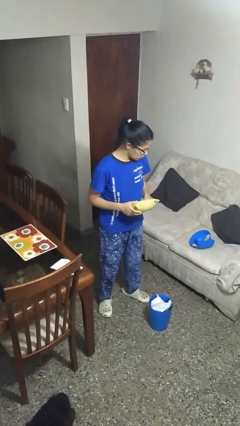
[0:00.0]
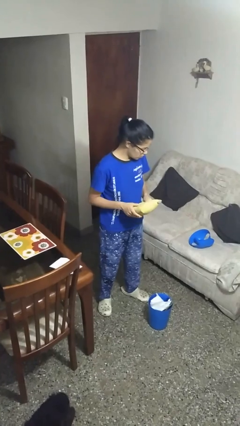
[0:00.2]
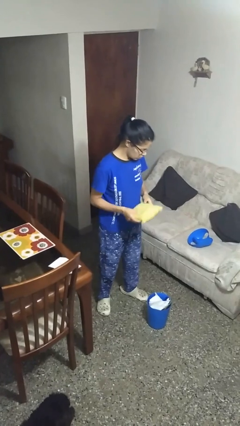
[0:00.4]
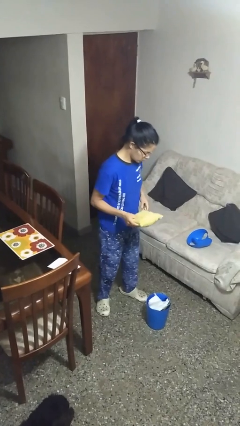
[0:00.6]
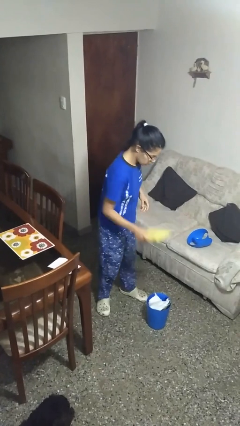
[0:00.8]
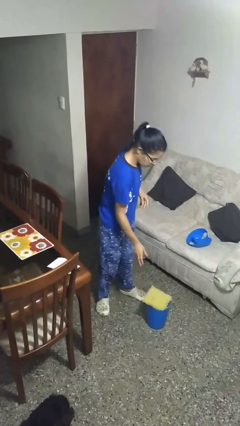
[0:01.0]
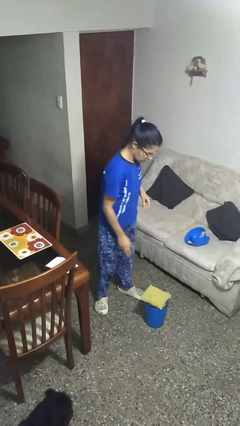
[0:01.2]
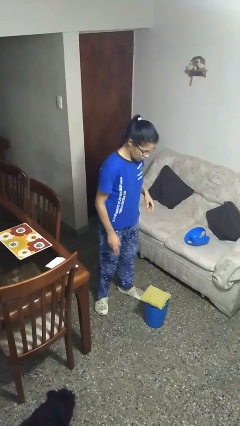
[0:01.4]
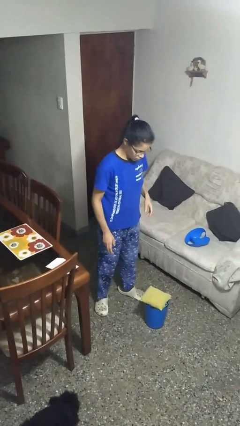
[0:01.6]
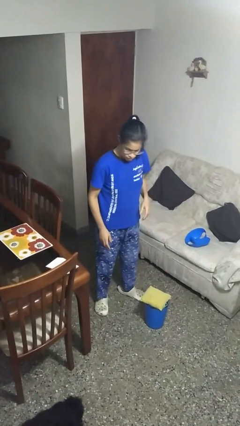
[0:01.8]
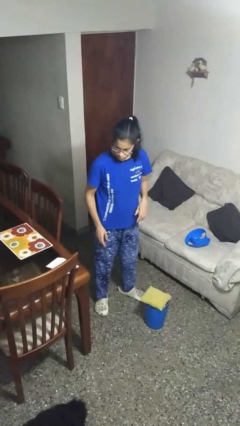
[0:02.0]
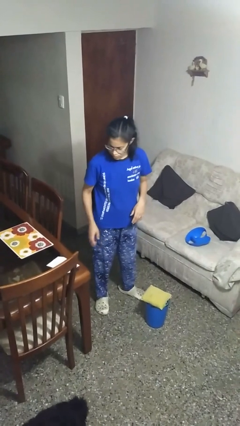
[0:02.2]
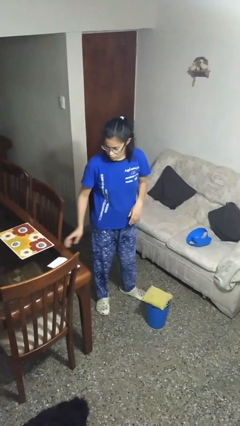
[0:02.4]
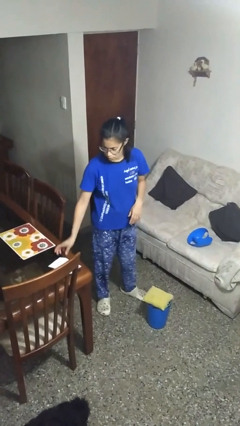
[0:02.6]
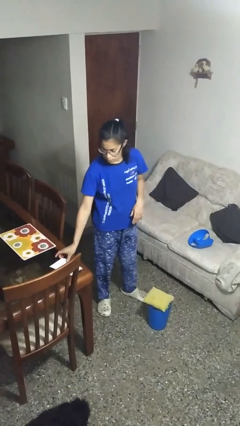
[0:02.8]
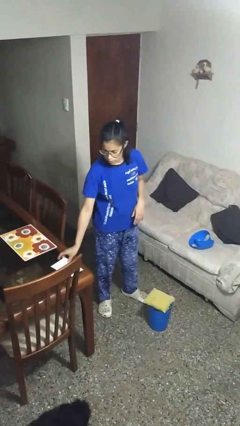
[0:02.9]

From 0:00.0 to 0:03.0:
person discards trash

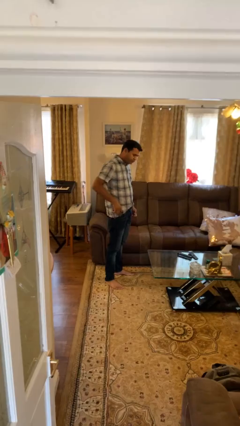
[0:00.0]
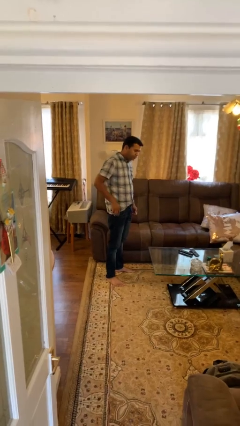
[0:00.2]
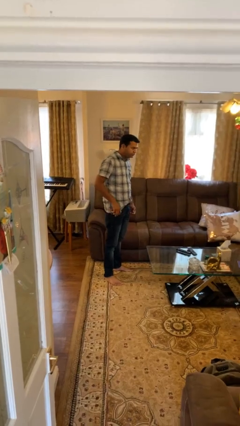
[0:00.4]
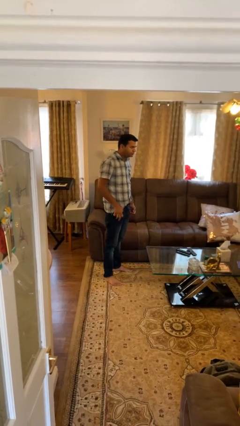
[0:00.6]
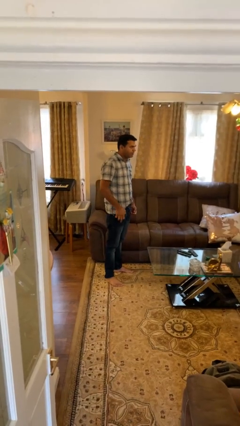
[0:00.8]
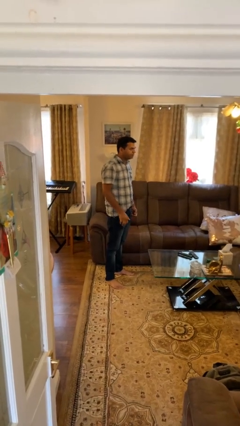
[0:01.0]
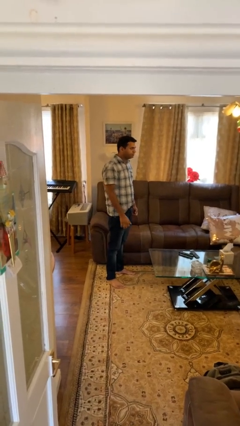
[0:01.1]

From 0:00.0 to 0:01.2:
person puts phone into pocket

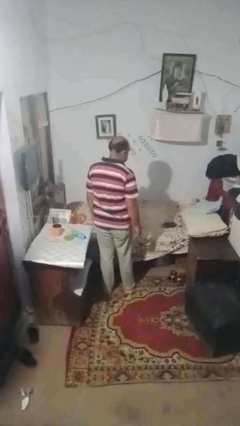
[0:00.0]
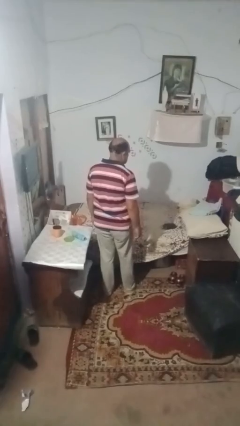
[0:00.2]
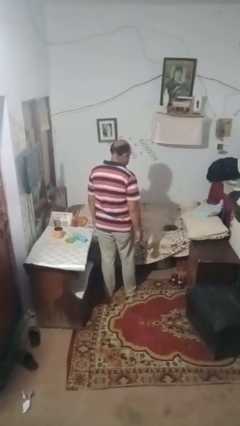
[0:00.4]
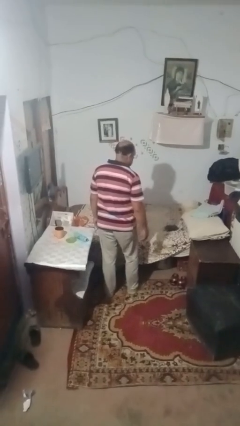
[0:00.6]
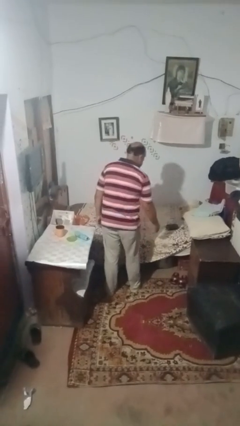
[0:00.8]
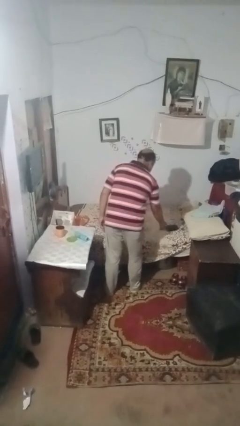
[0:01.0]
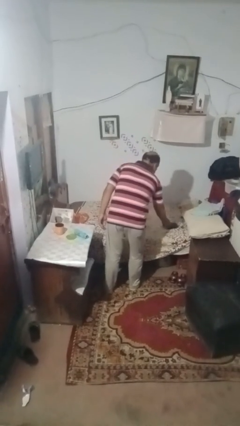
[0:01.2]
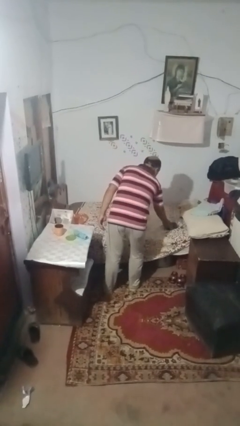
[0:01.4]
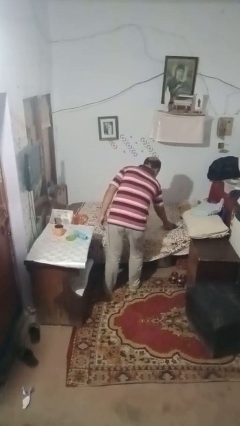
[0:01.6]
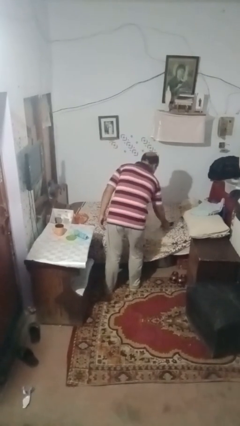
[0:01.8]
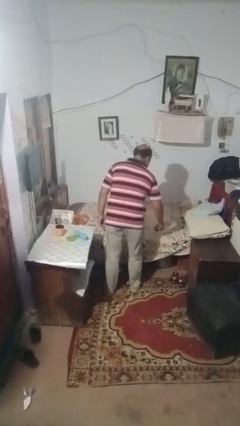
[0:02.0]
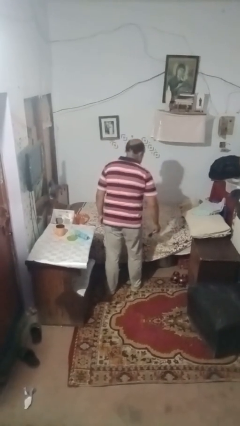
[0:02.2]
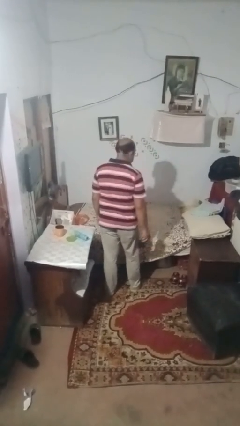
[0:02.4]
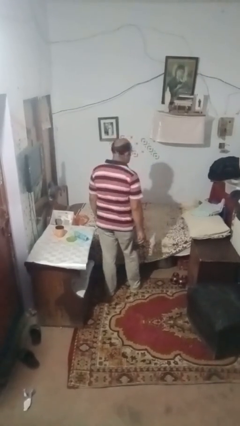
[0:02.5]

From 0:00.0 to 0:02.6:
person picks up object from bed

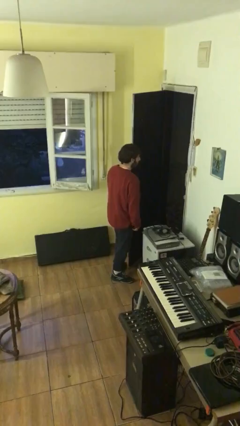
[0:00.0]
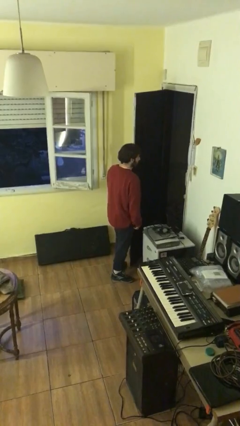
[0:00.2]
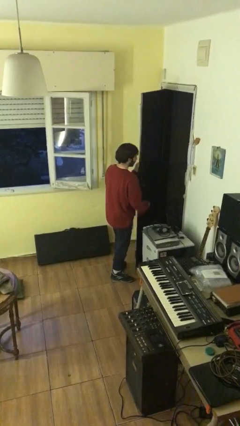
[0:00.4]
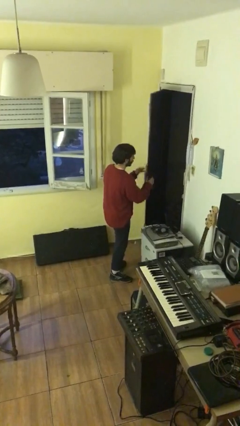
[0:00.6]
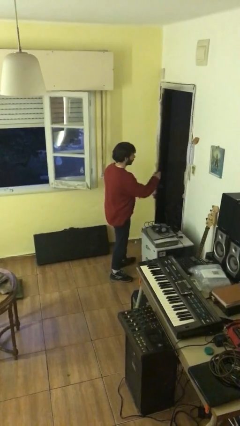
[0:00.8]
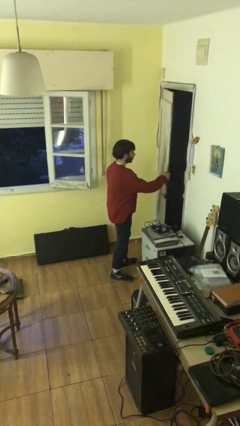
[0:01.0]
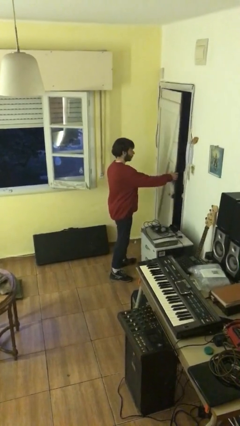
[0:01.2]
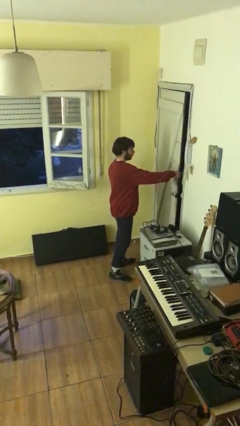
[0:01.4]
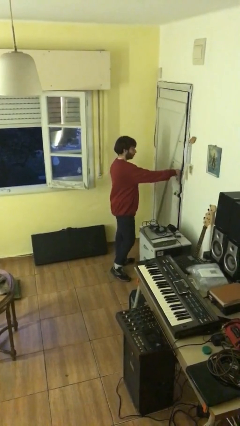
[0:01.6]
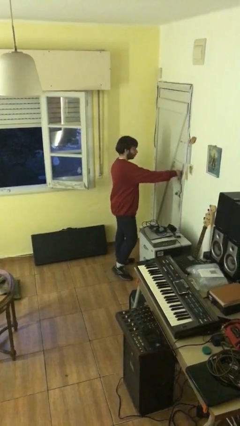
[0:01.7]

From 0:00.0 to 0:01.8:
person closes facility door

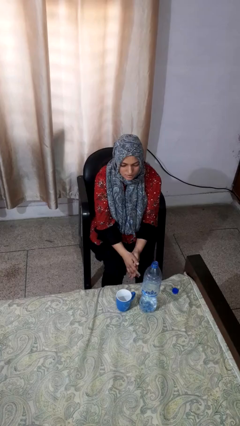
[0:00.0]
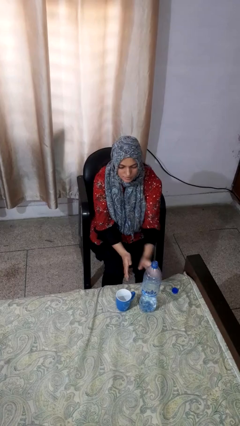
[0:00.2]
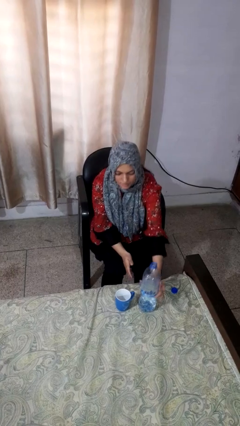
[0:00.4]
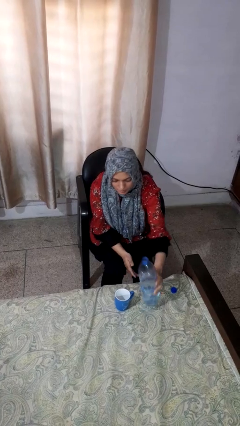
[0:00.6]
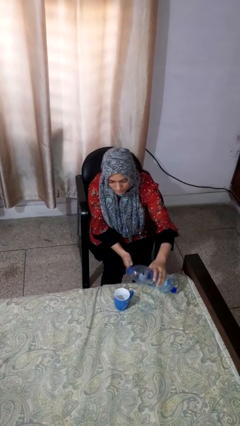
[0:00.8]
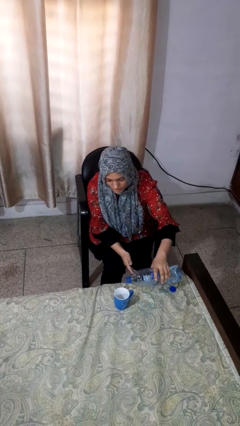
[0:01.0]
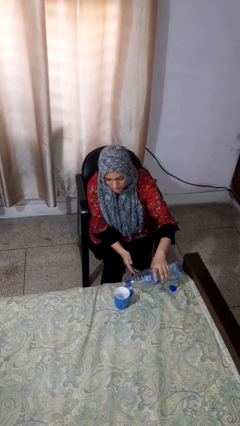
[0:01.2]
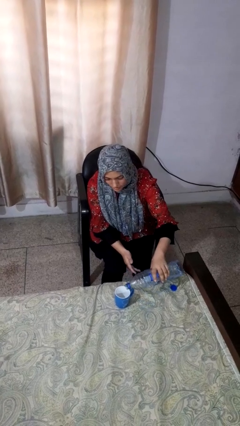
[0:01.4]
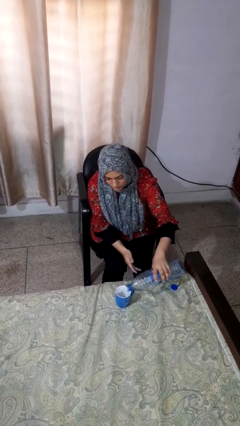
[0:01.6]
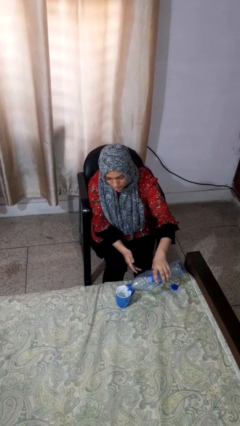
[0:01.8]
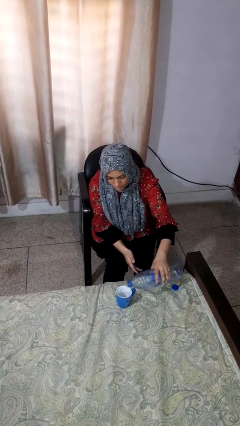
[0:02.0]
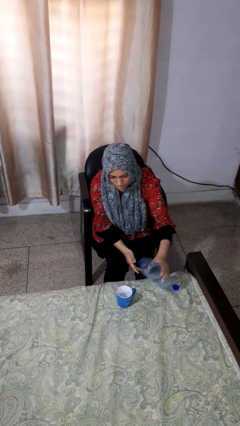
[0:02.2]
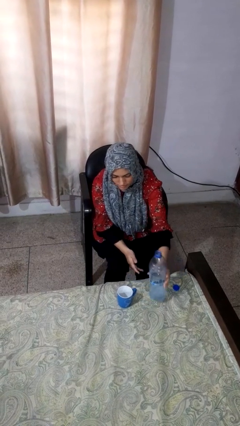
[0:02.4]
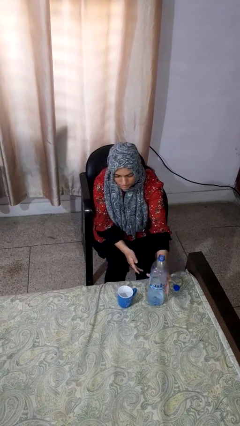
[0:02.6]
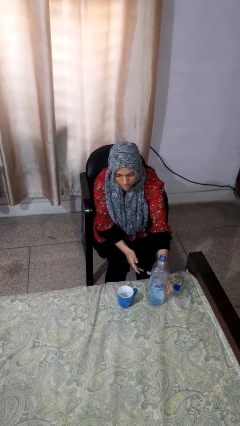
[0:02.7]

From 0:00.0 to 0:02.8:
person pours liquid into cup

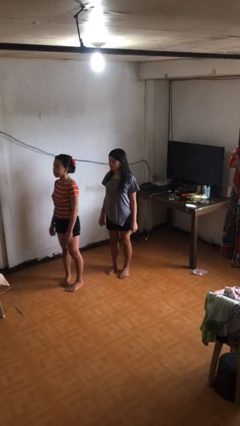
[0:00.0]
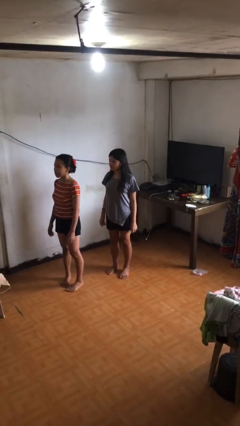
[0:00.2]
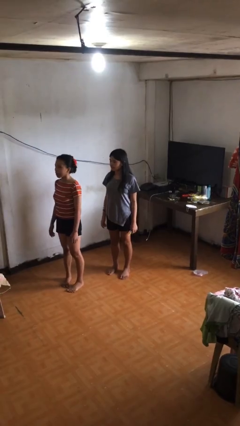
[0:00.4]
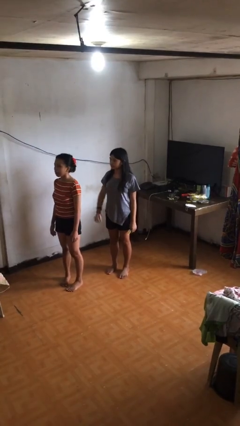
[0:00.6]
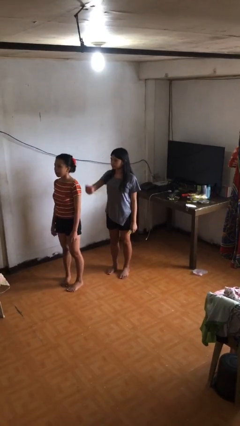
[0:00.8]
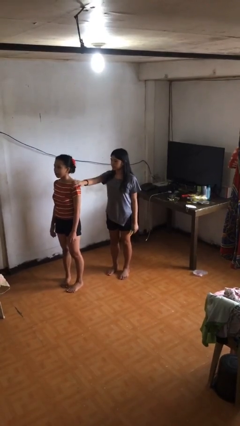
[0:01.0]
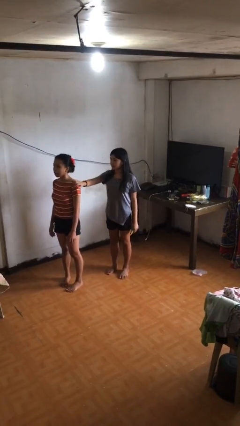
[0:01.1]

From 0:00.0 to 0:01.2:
person grabs person by shoulder

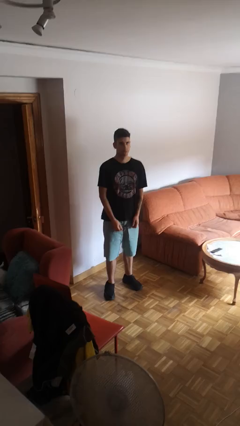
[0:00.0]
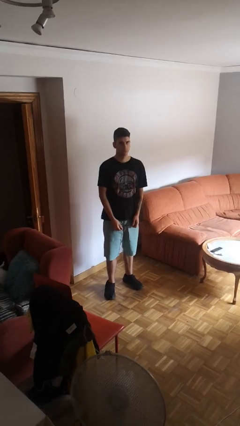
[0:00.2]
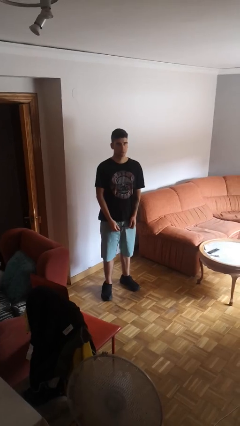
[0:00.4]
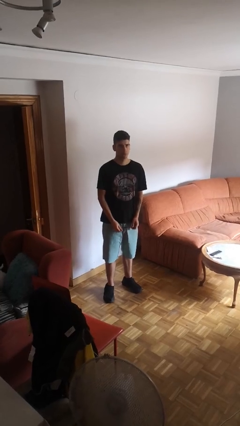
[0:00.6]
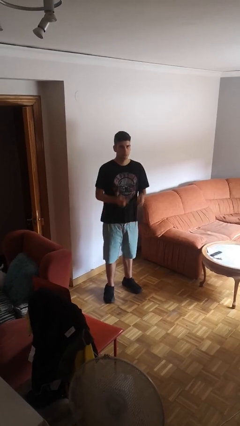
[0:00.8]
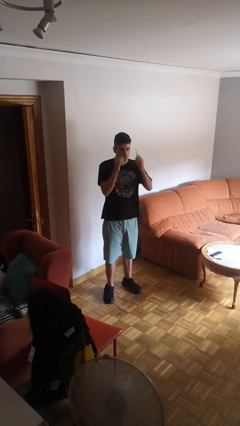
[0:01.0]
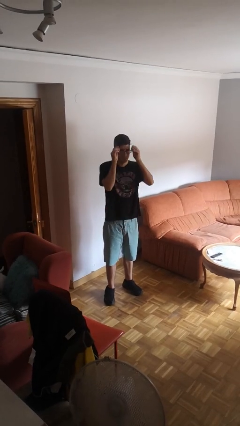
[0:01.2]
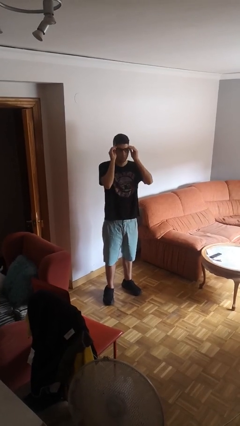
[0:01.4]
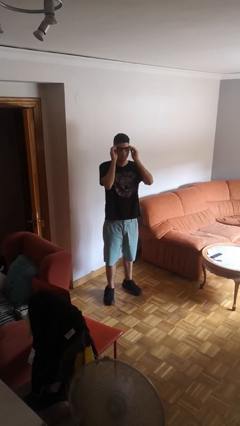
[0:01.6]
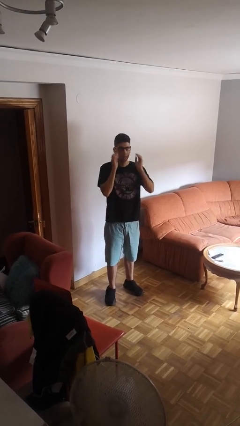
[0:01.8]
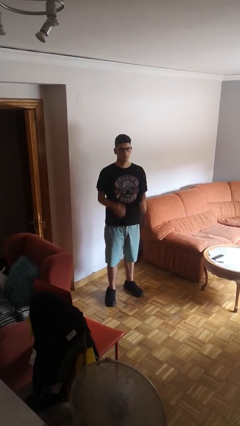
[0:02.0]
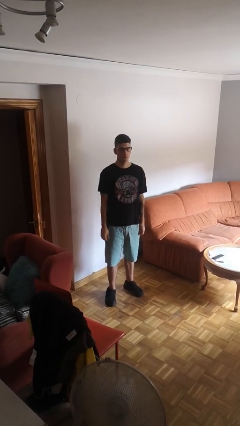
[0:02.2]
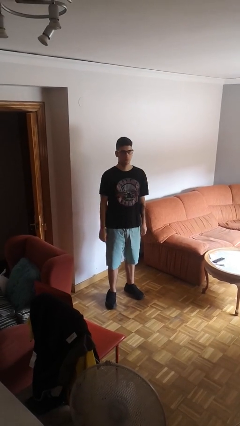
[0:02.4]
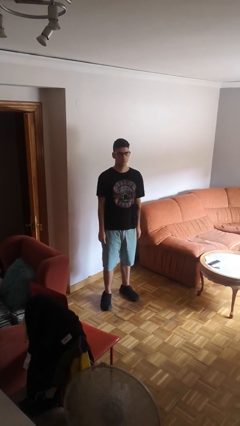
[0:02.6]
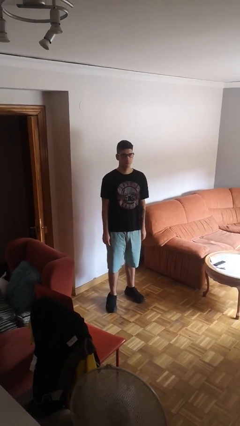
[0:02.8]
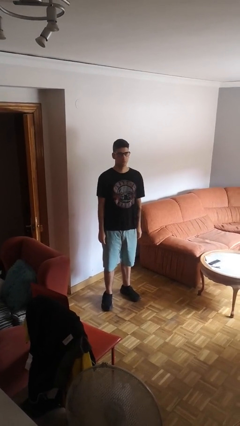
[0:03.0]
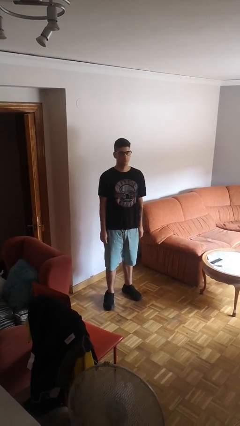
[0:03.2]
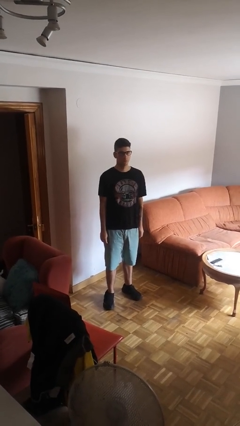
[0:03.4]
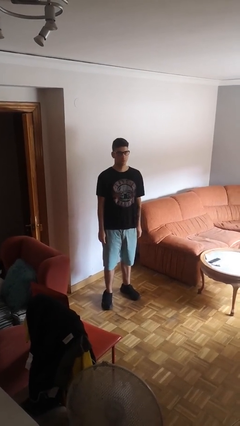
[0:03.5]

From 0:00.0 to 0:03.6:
person puts on glasses
